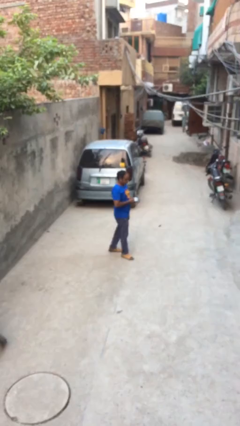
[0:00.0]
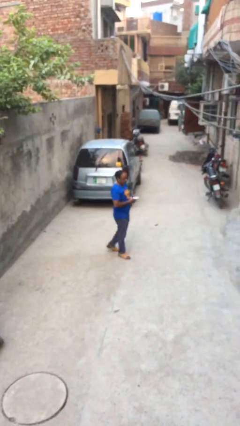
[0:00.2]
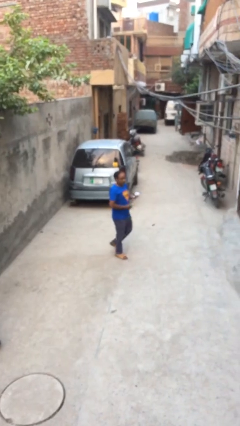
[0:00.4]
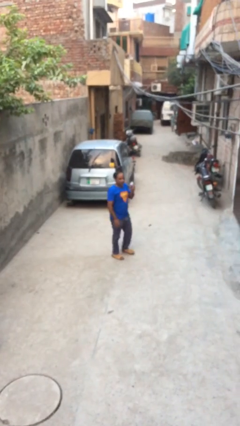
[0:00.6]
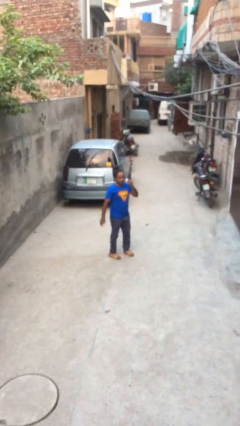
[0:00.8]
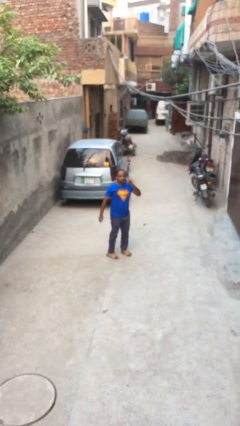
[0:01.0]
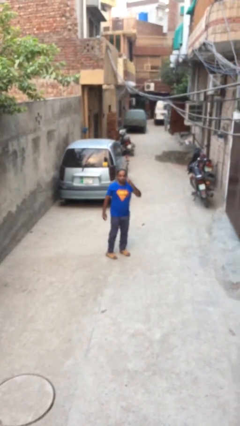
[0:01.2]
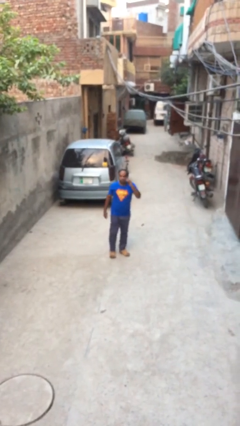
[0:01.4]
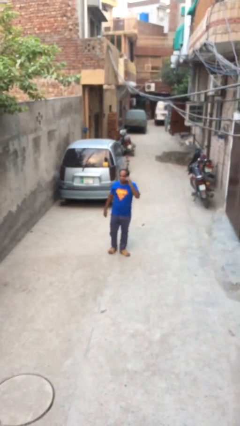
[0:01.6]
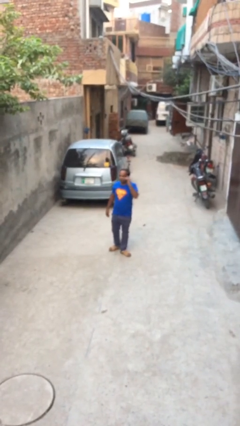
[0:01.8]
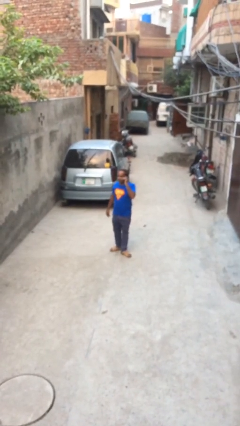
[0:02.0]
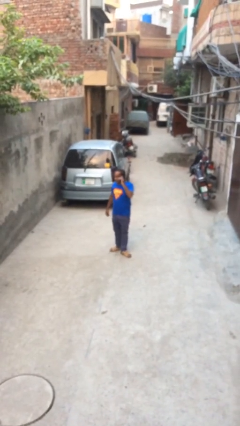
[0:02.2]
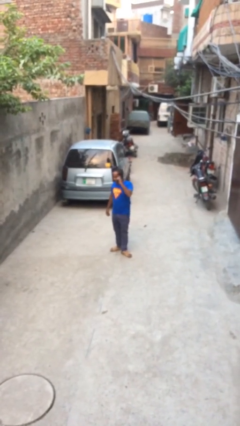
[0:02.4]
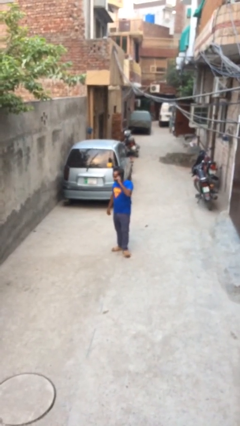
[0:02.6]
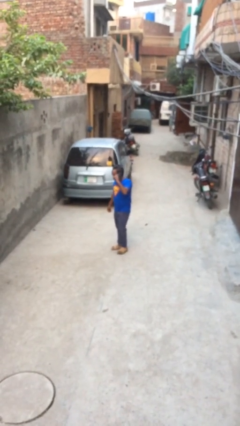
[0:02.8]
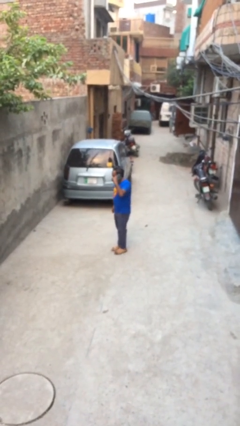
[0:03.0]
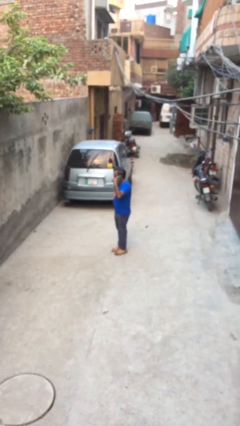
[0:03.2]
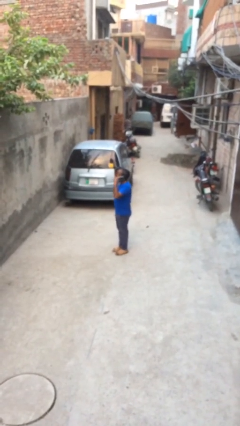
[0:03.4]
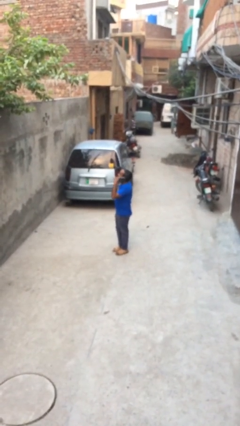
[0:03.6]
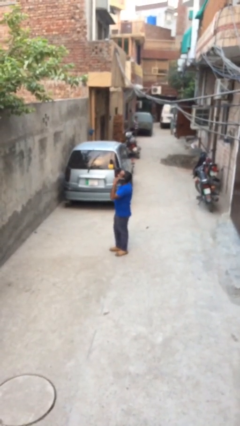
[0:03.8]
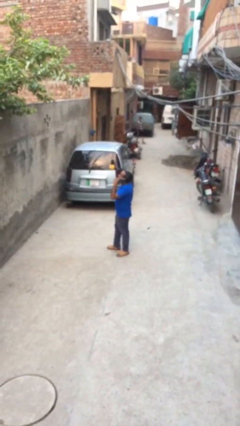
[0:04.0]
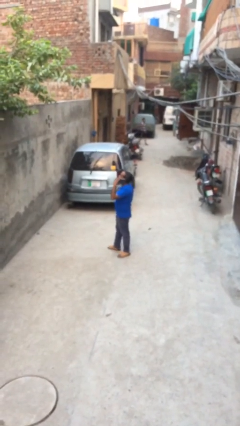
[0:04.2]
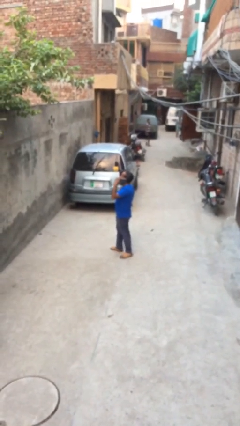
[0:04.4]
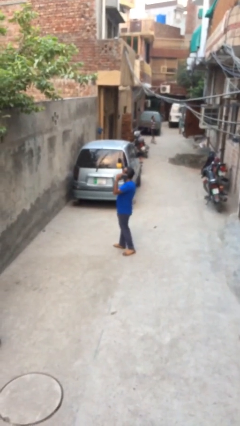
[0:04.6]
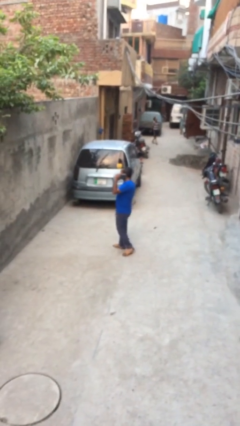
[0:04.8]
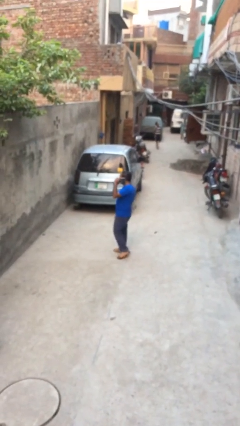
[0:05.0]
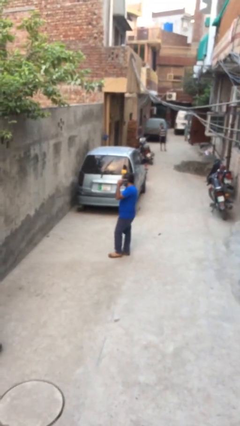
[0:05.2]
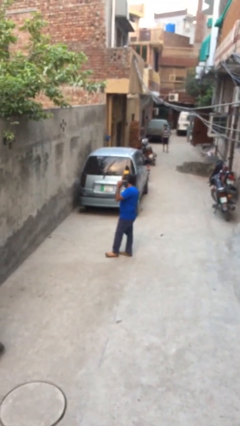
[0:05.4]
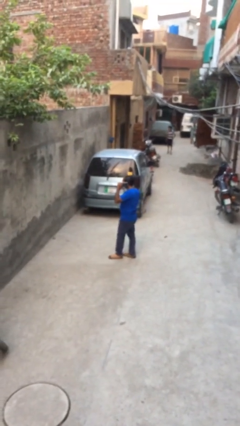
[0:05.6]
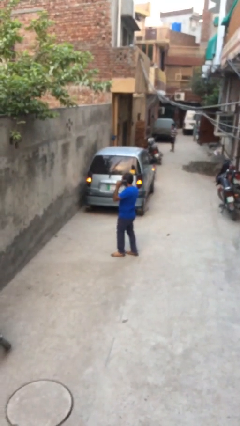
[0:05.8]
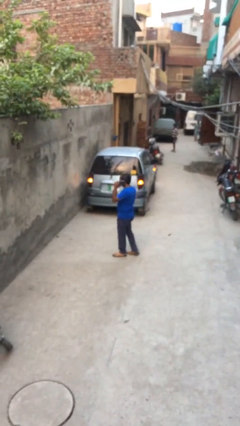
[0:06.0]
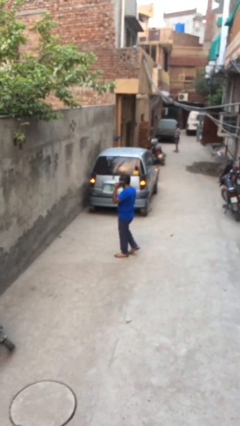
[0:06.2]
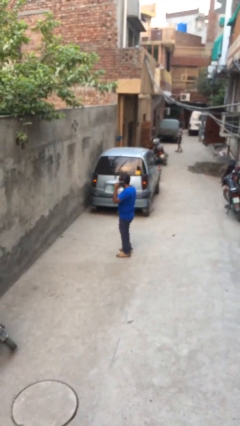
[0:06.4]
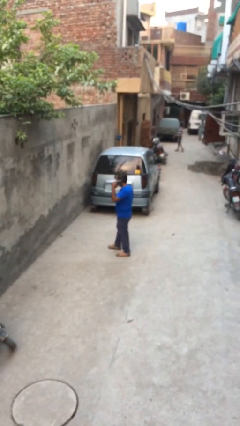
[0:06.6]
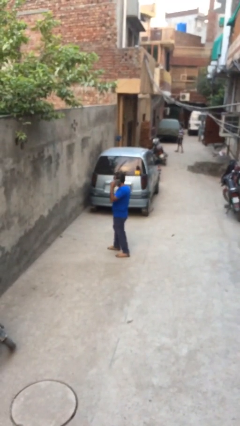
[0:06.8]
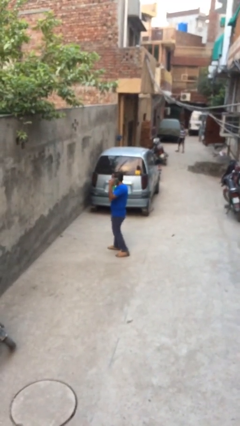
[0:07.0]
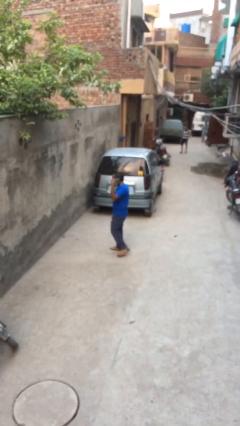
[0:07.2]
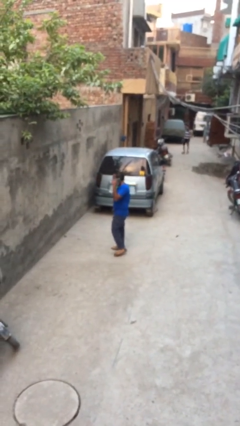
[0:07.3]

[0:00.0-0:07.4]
person talks on phone

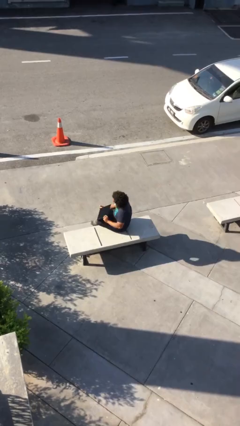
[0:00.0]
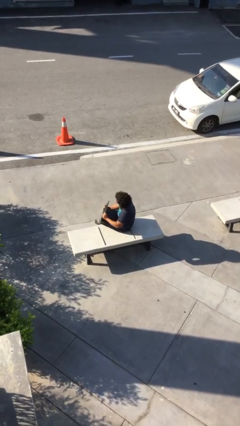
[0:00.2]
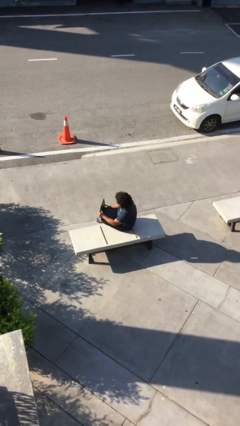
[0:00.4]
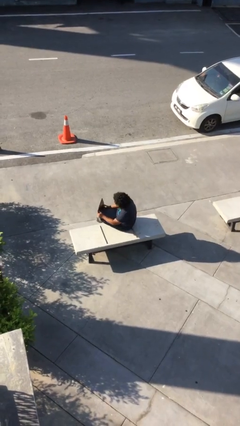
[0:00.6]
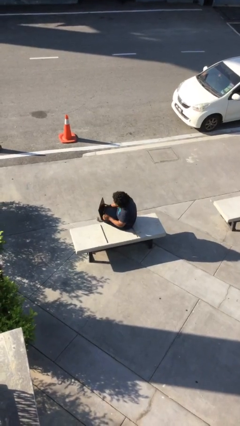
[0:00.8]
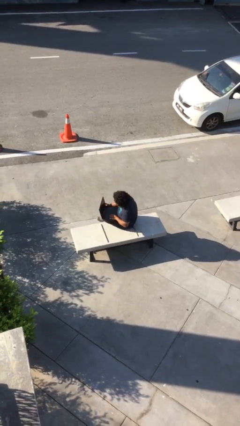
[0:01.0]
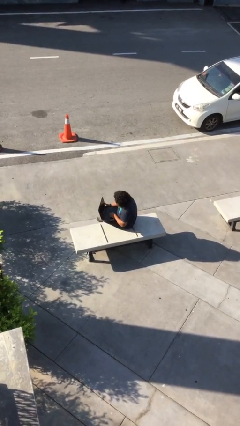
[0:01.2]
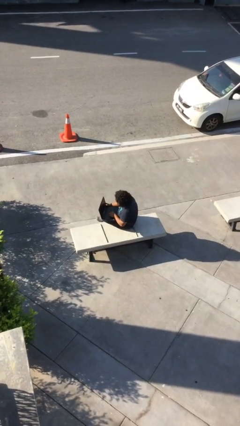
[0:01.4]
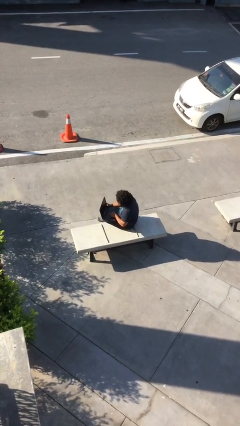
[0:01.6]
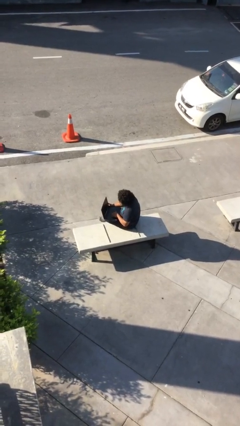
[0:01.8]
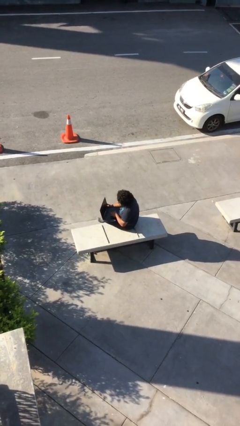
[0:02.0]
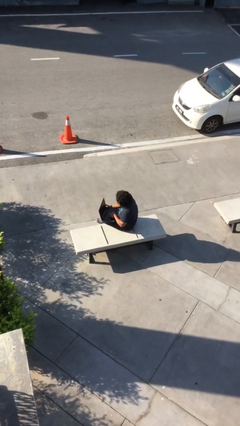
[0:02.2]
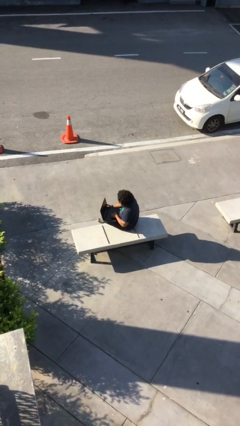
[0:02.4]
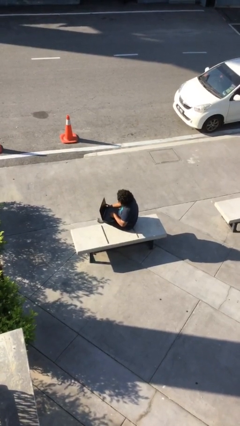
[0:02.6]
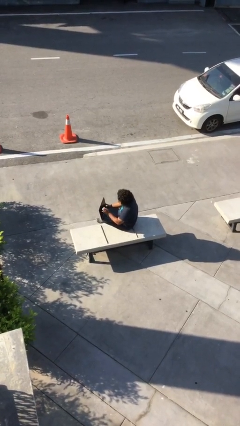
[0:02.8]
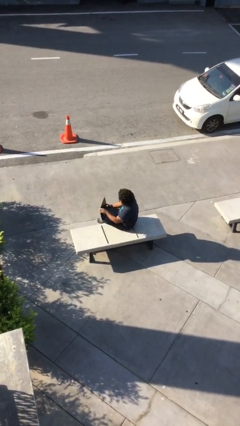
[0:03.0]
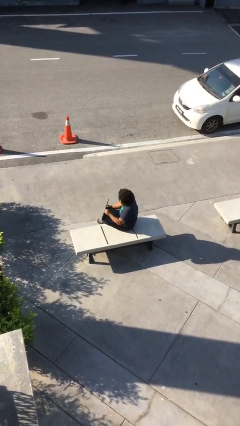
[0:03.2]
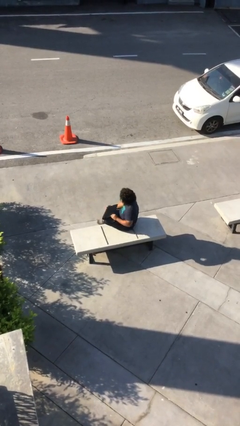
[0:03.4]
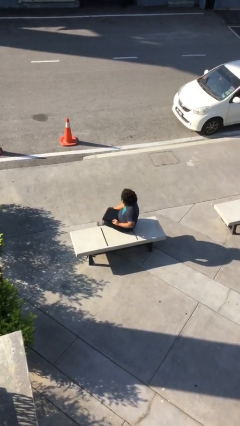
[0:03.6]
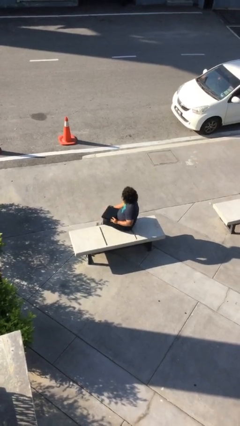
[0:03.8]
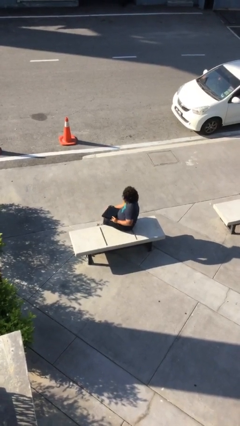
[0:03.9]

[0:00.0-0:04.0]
person interacts with laptop

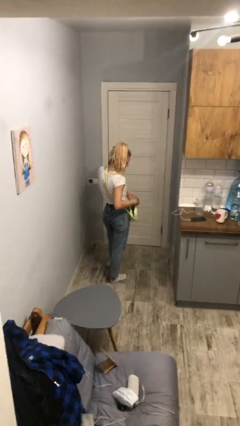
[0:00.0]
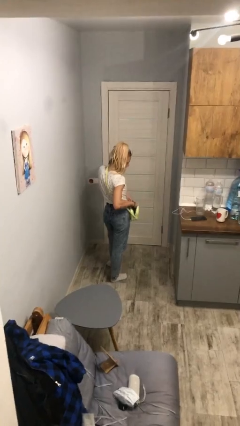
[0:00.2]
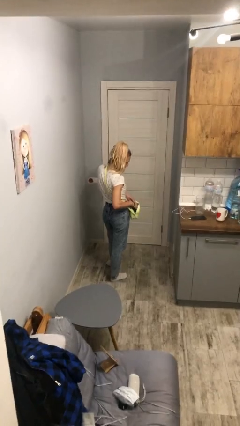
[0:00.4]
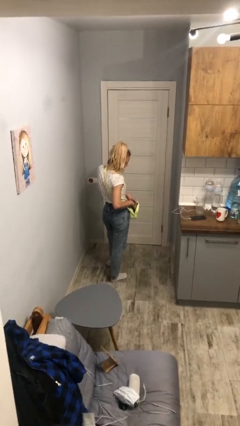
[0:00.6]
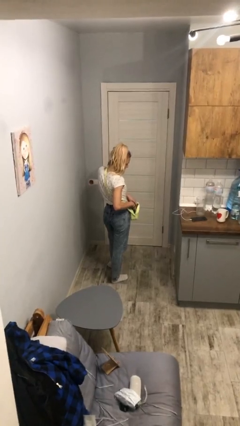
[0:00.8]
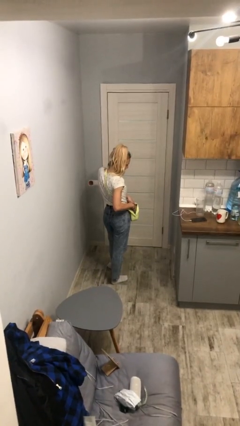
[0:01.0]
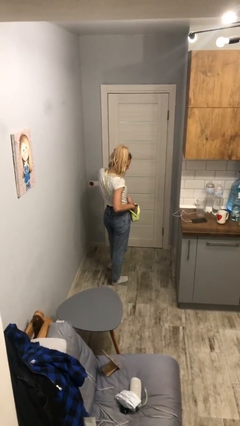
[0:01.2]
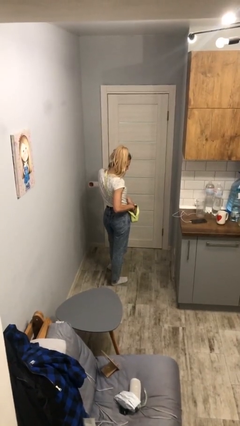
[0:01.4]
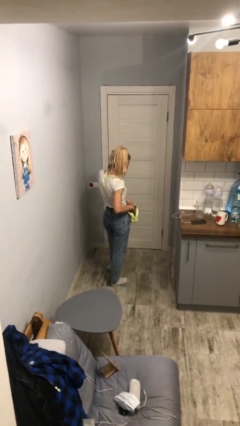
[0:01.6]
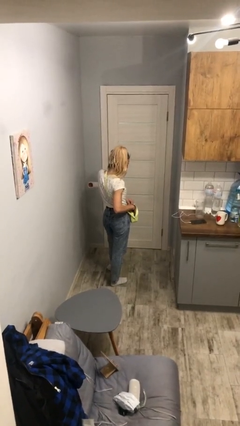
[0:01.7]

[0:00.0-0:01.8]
person searches in purse

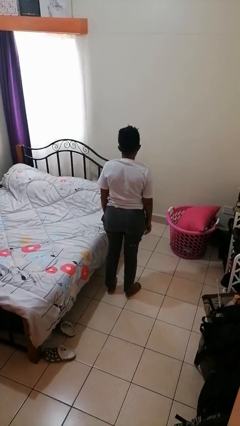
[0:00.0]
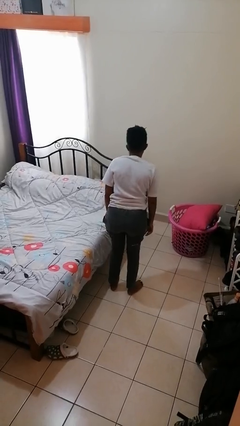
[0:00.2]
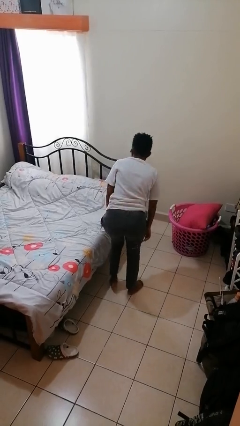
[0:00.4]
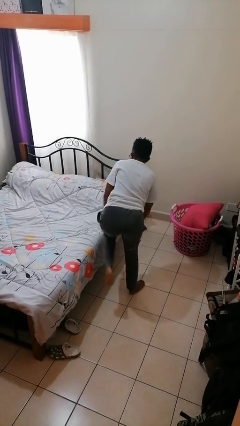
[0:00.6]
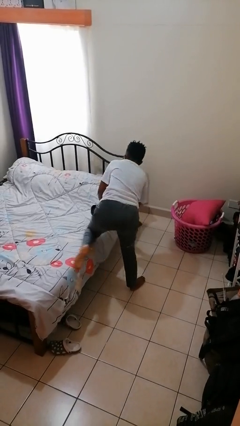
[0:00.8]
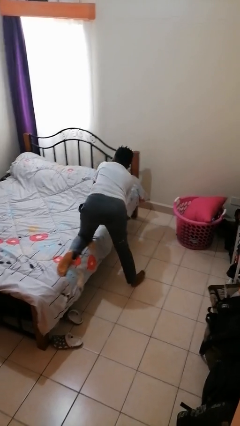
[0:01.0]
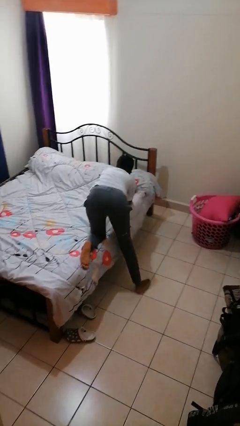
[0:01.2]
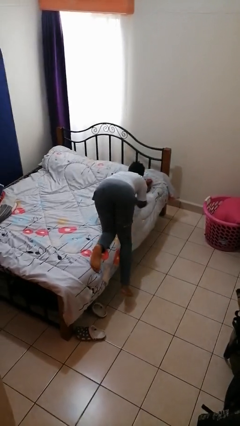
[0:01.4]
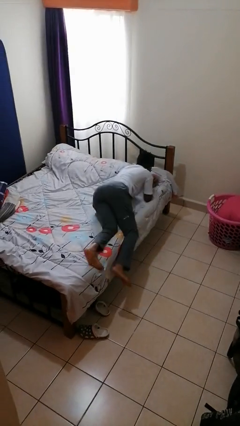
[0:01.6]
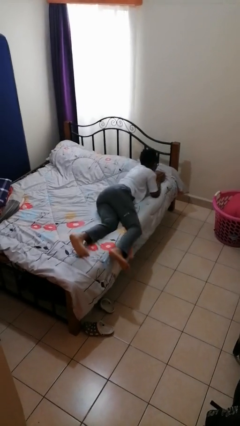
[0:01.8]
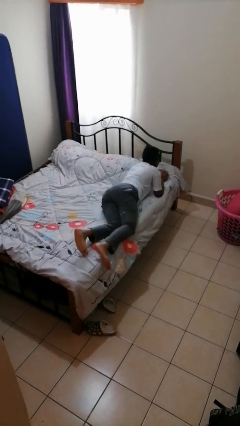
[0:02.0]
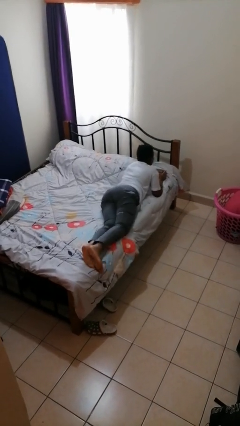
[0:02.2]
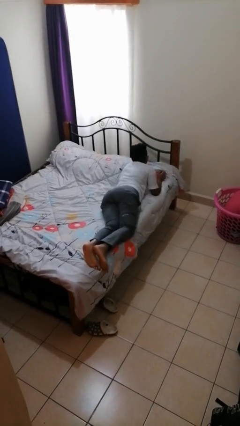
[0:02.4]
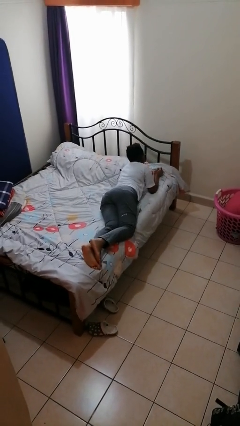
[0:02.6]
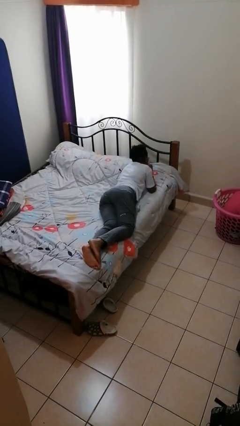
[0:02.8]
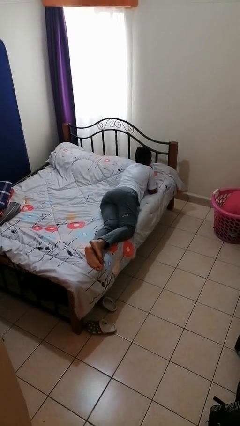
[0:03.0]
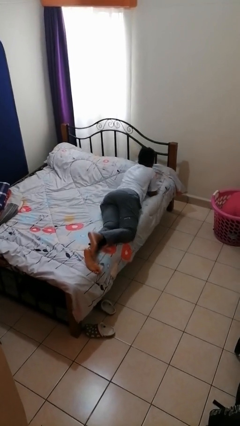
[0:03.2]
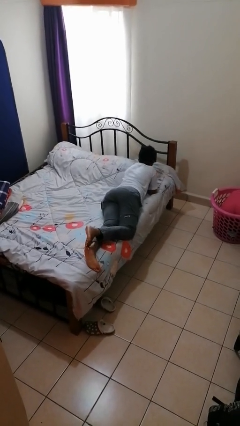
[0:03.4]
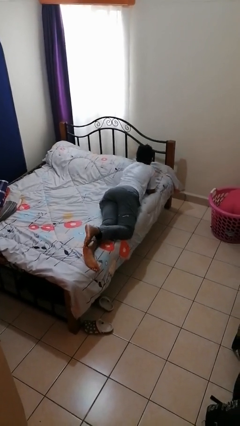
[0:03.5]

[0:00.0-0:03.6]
person lies down on bed

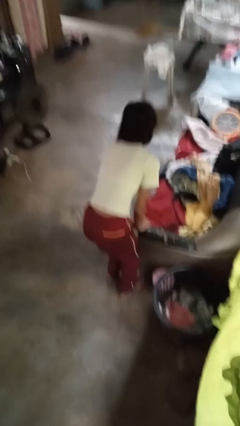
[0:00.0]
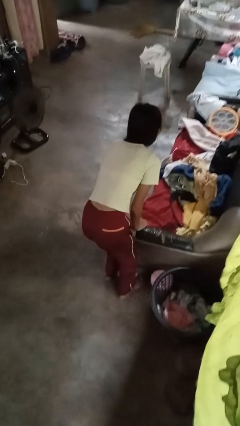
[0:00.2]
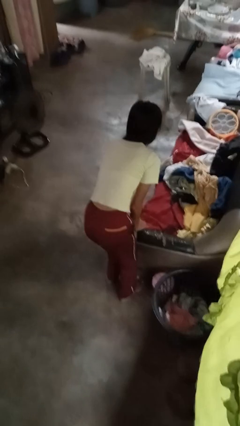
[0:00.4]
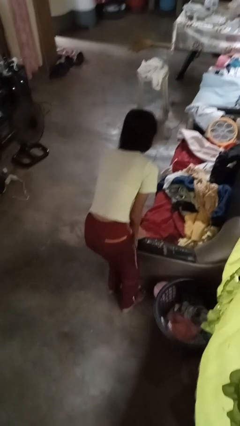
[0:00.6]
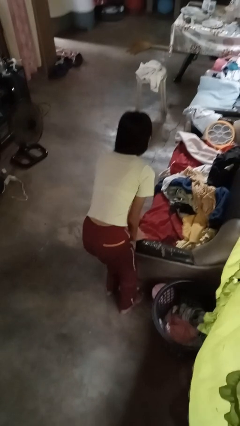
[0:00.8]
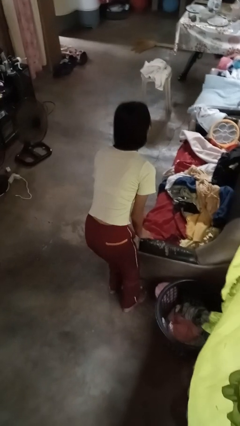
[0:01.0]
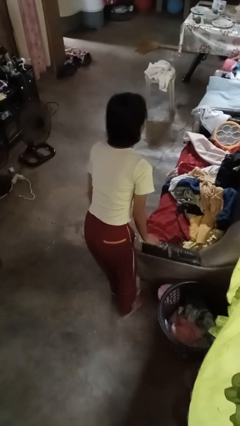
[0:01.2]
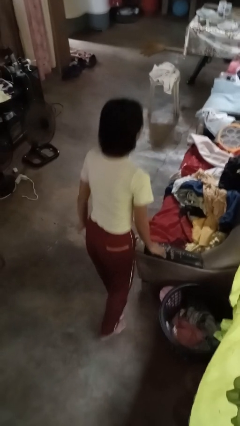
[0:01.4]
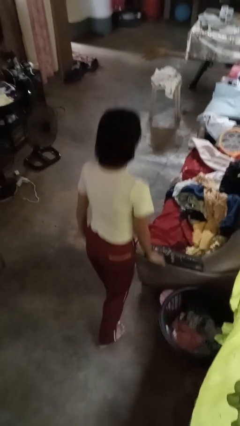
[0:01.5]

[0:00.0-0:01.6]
person stubs toe
